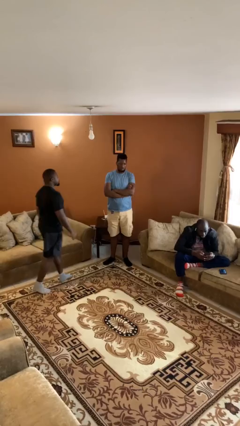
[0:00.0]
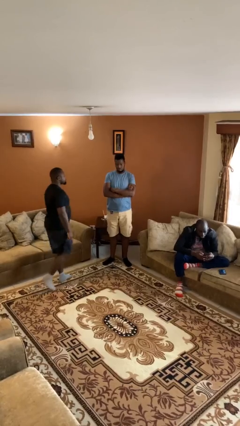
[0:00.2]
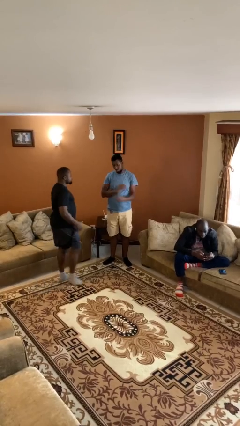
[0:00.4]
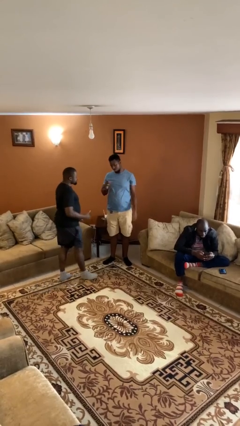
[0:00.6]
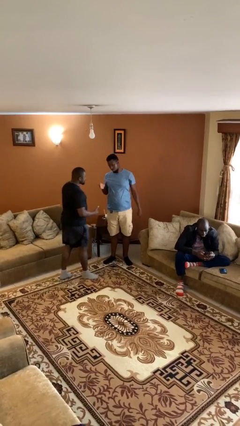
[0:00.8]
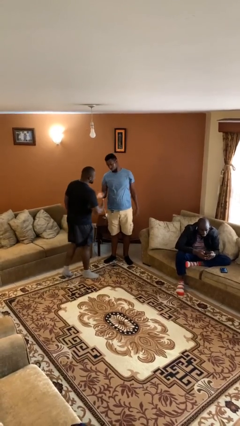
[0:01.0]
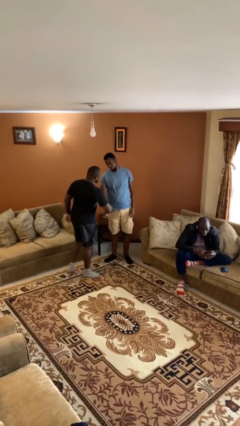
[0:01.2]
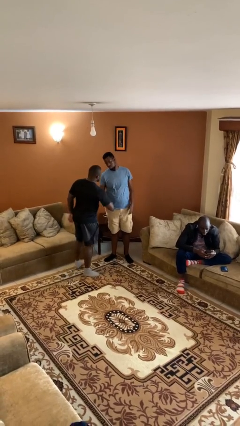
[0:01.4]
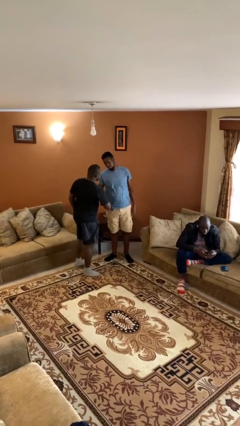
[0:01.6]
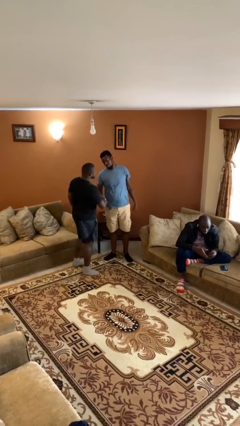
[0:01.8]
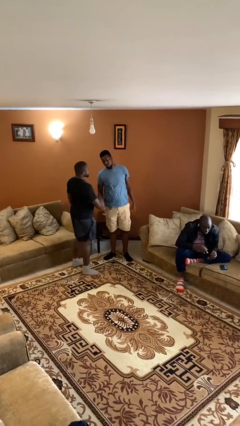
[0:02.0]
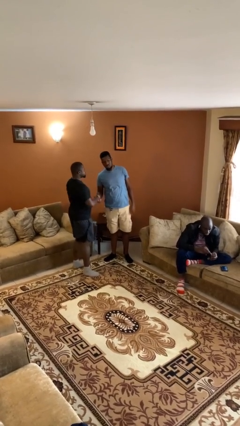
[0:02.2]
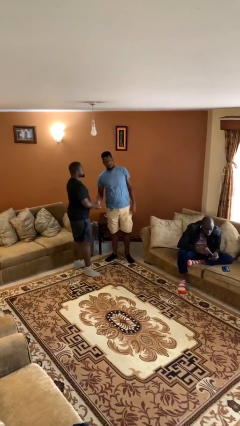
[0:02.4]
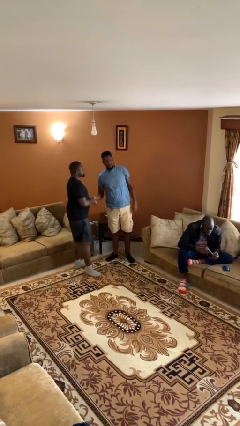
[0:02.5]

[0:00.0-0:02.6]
person shakes hand

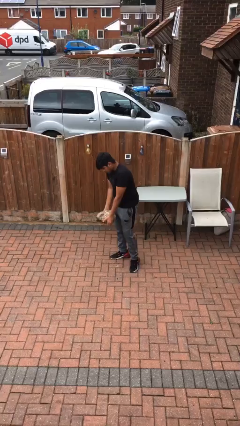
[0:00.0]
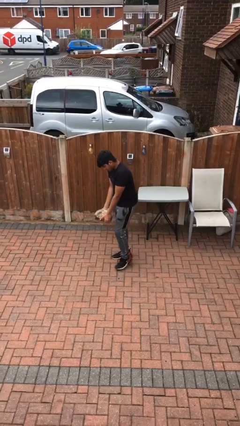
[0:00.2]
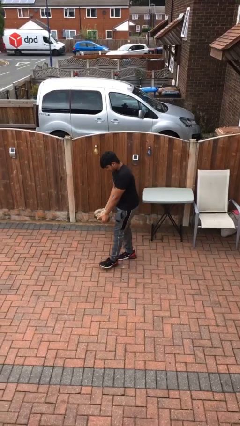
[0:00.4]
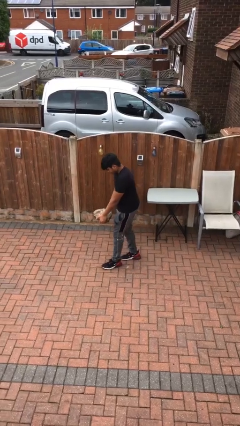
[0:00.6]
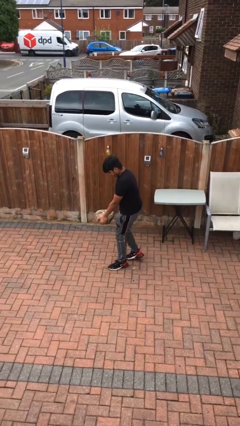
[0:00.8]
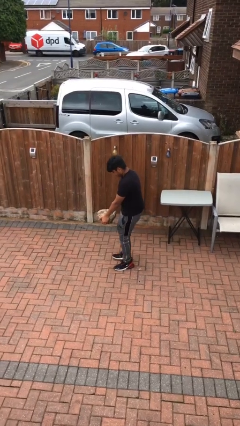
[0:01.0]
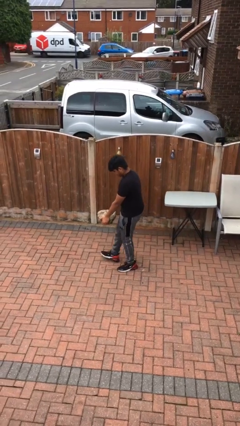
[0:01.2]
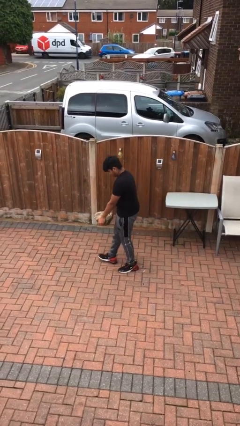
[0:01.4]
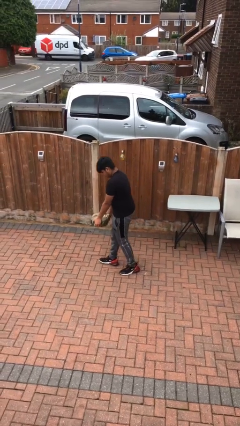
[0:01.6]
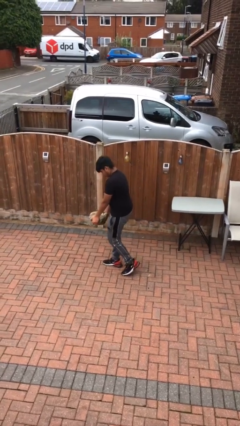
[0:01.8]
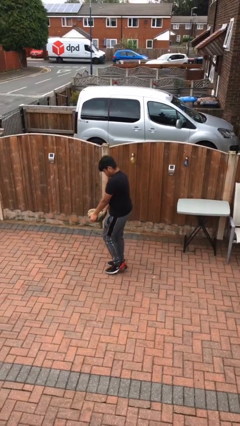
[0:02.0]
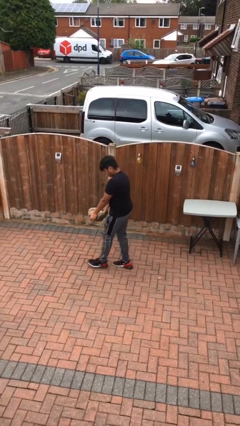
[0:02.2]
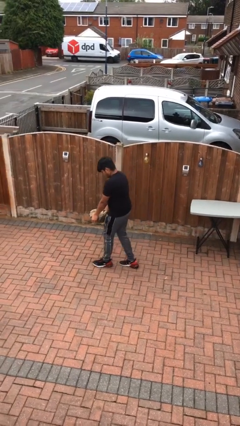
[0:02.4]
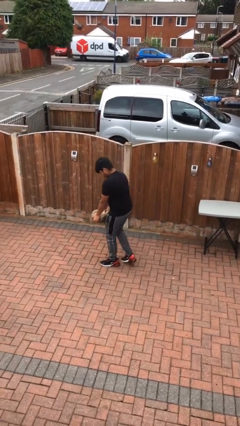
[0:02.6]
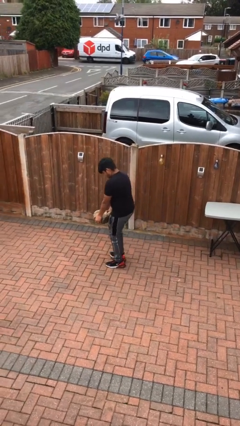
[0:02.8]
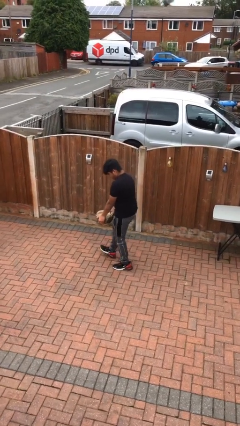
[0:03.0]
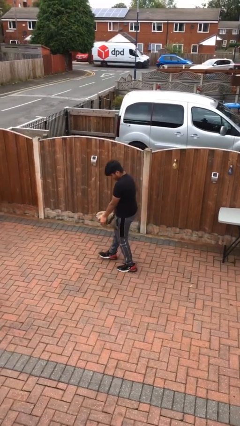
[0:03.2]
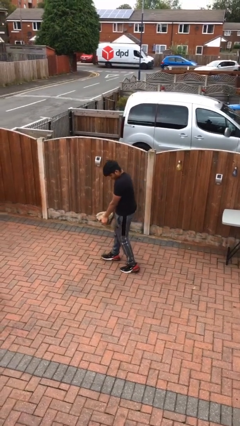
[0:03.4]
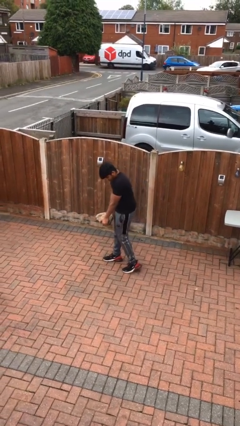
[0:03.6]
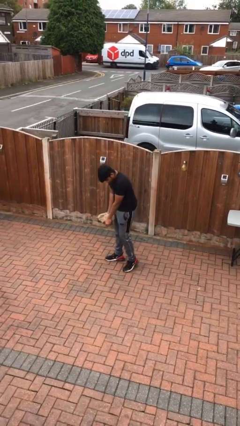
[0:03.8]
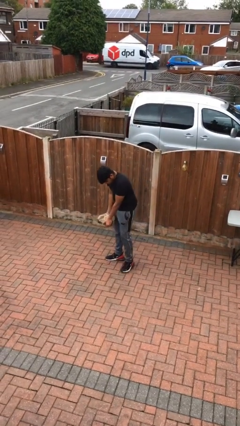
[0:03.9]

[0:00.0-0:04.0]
person carries heavy object

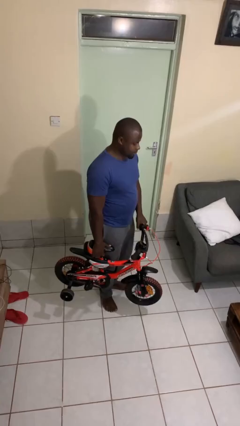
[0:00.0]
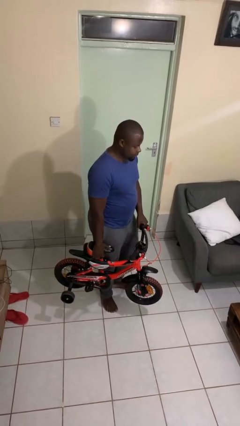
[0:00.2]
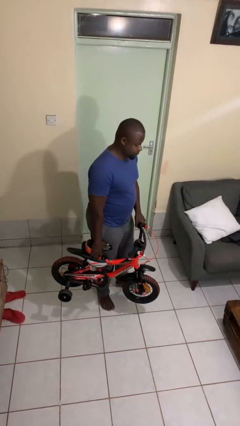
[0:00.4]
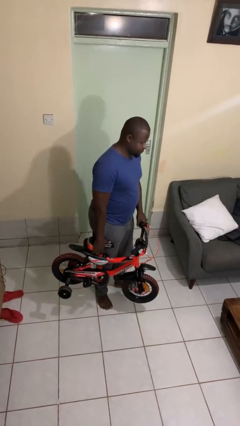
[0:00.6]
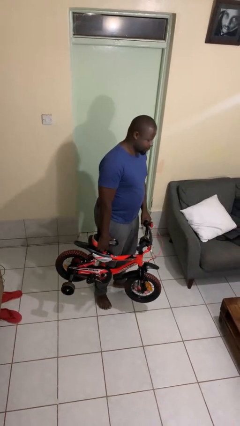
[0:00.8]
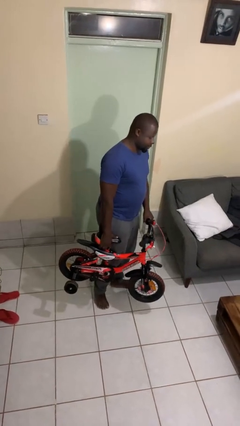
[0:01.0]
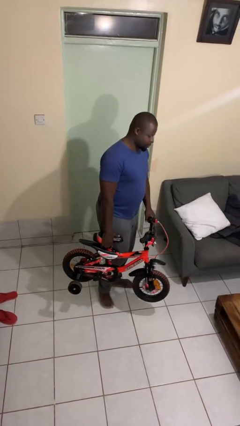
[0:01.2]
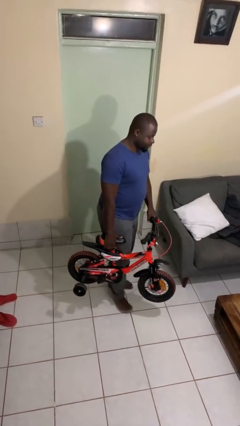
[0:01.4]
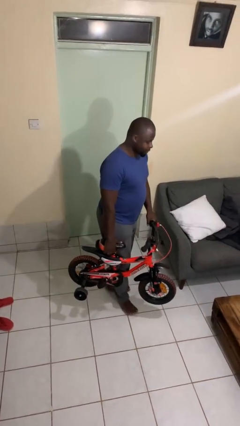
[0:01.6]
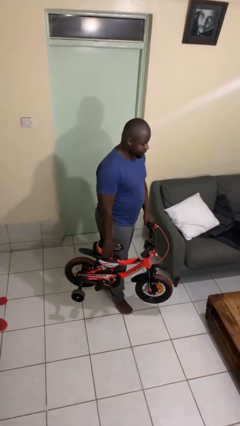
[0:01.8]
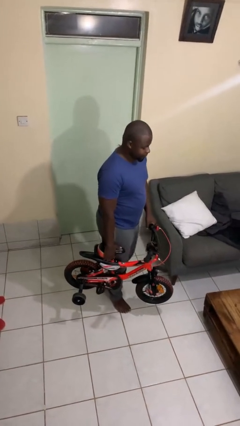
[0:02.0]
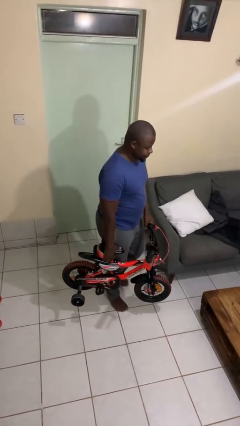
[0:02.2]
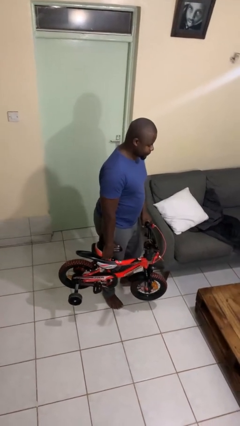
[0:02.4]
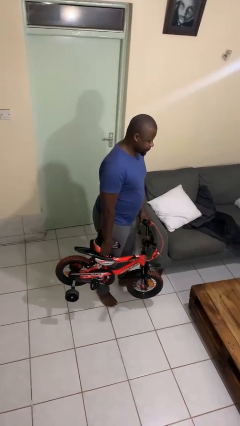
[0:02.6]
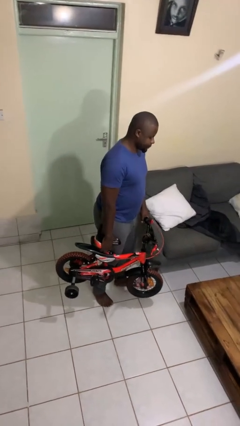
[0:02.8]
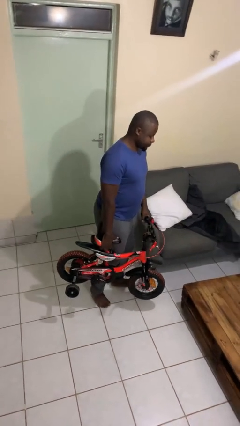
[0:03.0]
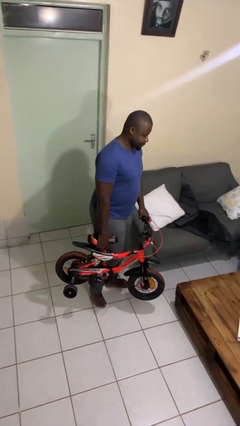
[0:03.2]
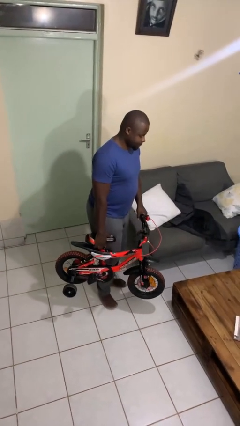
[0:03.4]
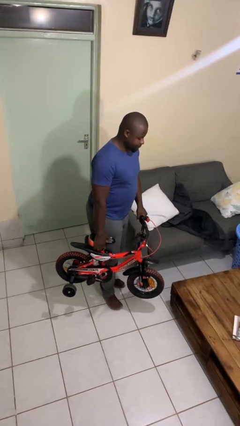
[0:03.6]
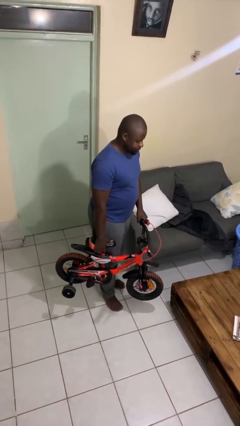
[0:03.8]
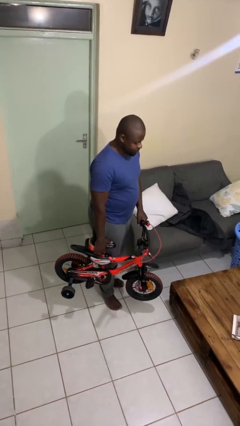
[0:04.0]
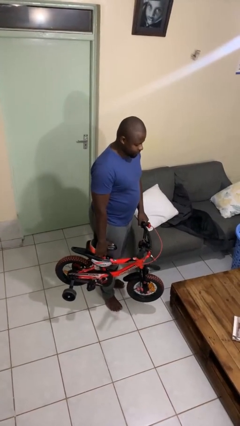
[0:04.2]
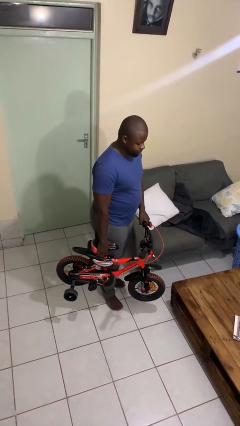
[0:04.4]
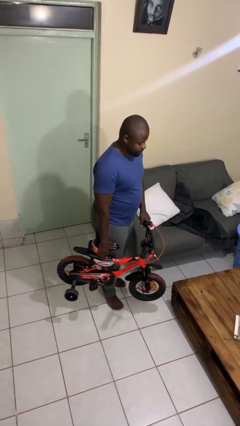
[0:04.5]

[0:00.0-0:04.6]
person carries bicycle

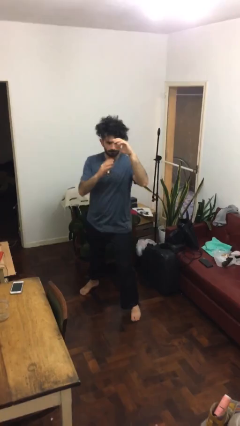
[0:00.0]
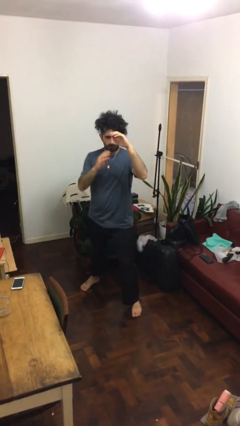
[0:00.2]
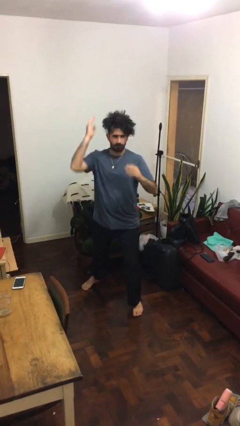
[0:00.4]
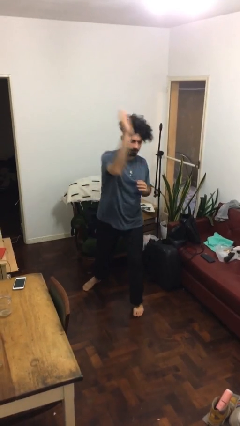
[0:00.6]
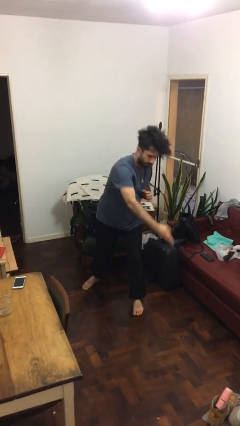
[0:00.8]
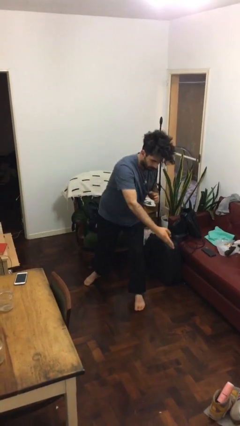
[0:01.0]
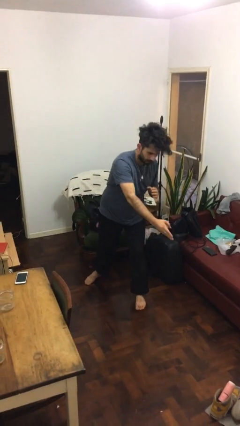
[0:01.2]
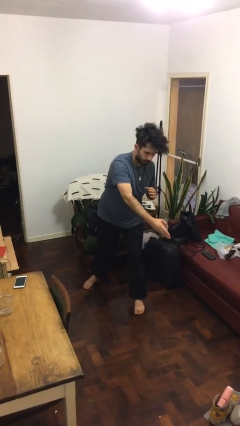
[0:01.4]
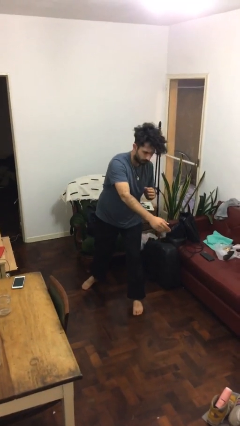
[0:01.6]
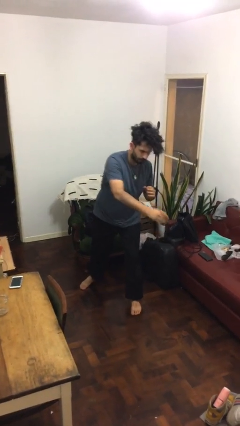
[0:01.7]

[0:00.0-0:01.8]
person karate chop

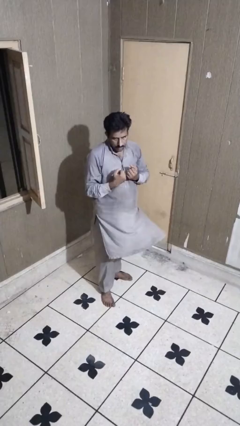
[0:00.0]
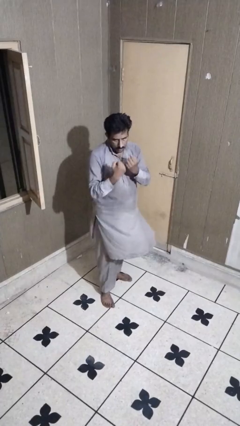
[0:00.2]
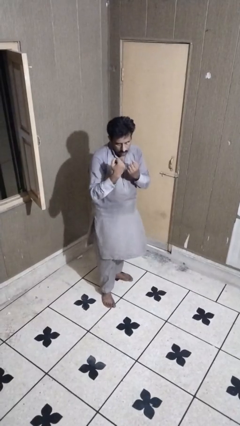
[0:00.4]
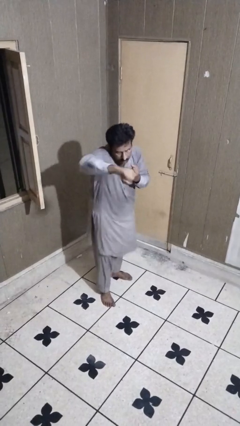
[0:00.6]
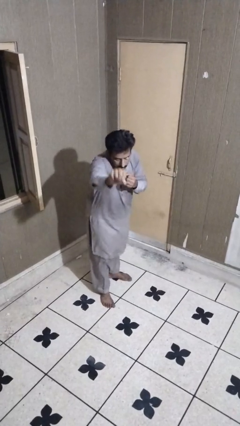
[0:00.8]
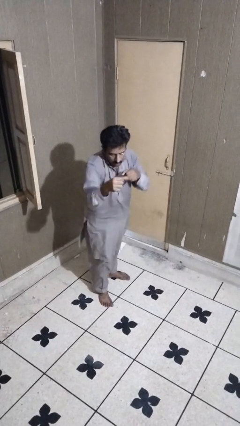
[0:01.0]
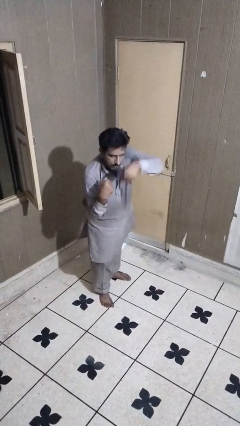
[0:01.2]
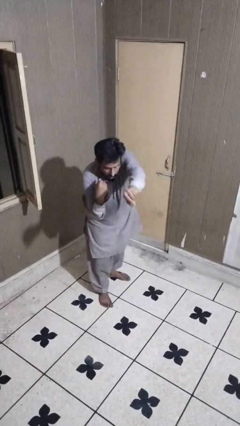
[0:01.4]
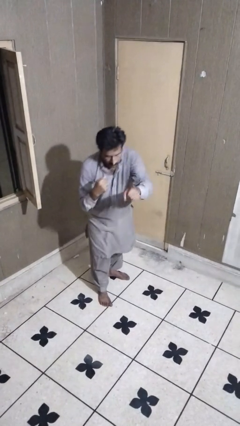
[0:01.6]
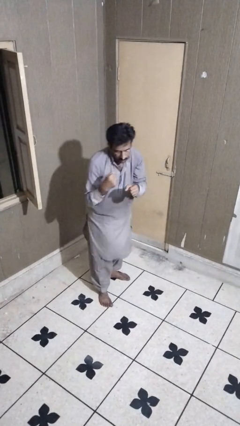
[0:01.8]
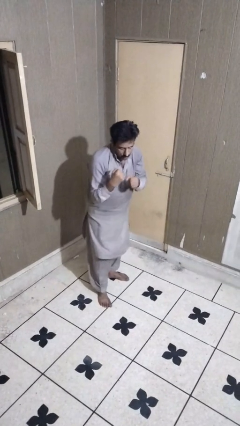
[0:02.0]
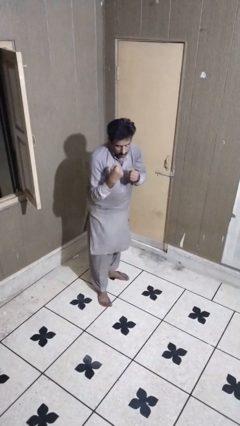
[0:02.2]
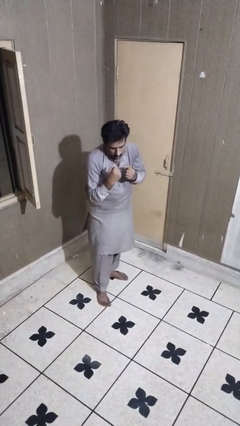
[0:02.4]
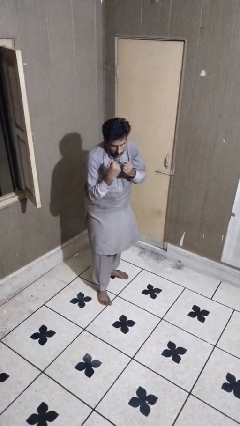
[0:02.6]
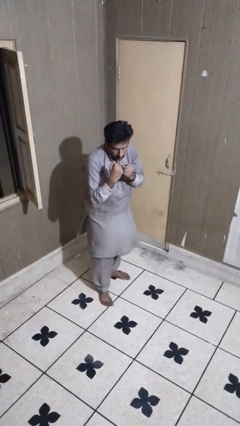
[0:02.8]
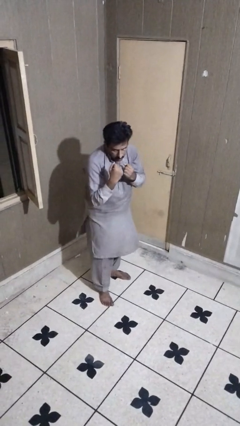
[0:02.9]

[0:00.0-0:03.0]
person punches

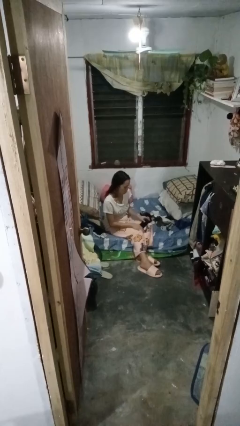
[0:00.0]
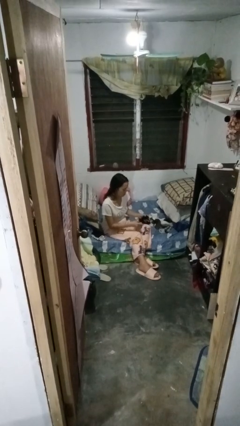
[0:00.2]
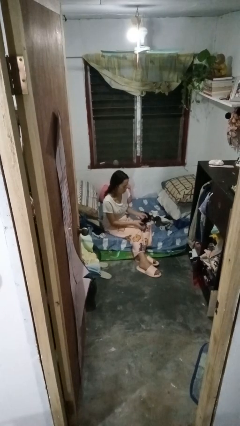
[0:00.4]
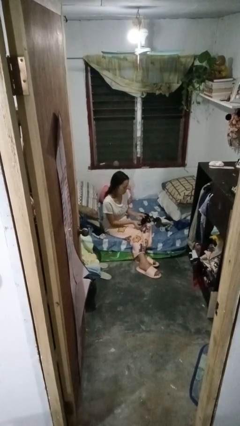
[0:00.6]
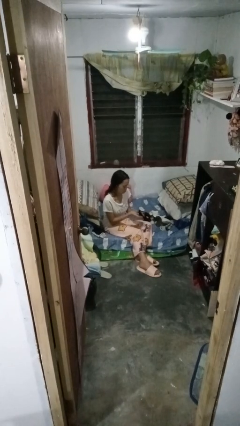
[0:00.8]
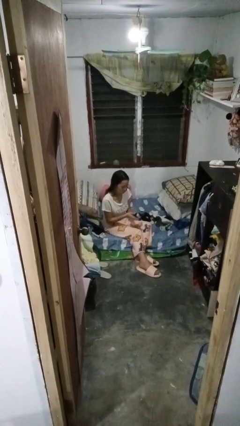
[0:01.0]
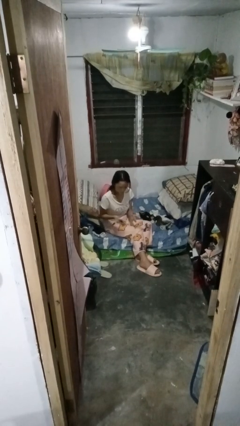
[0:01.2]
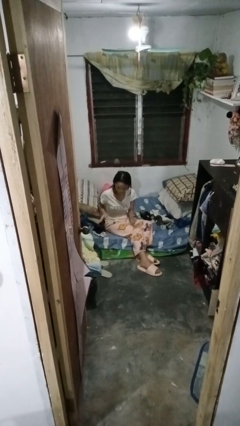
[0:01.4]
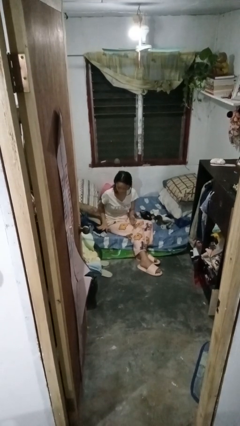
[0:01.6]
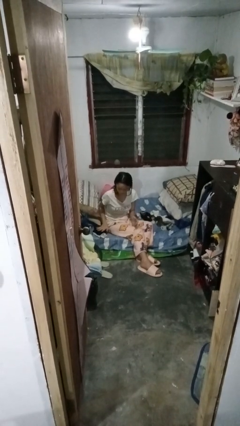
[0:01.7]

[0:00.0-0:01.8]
person folds socks
